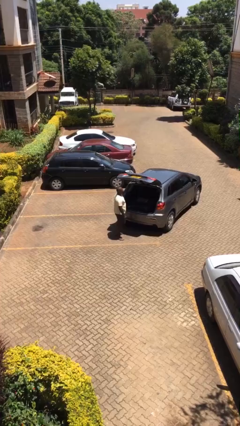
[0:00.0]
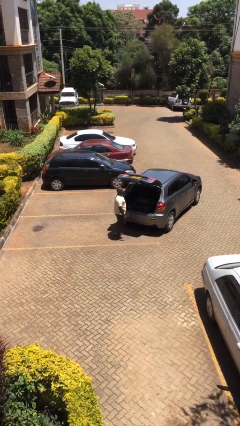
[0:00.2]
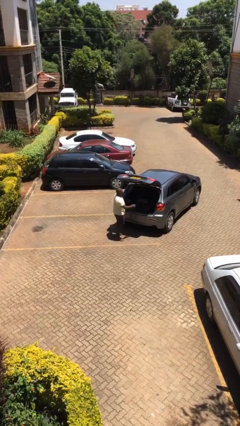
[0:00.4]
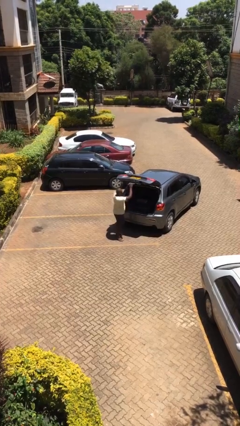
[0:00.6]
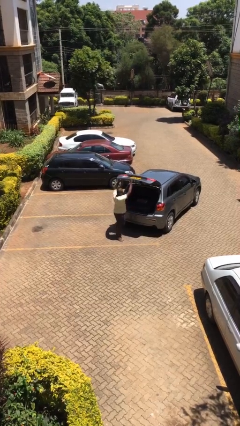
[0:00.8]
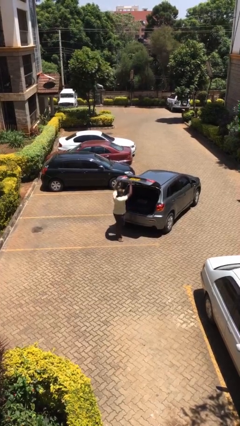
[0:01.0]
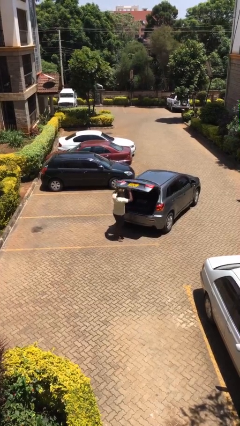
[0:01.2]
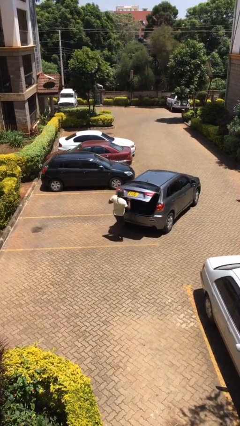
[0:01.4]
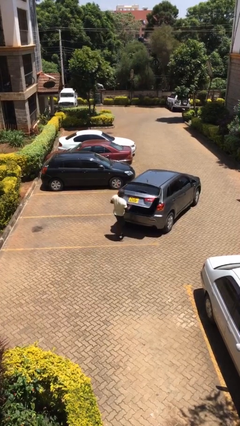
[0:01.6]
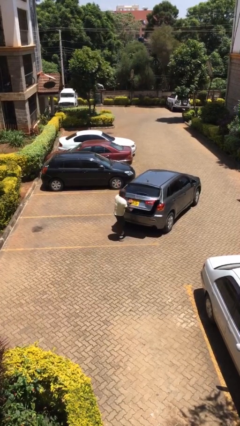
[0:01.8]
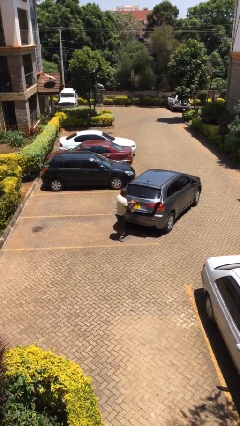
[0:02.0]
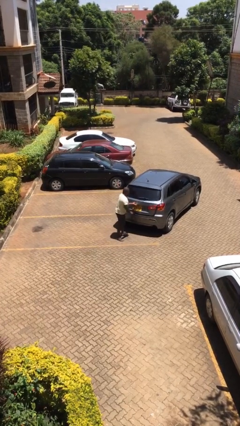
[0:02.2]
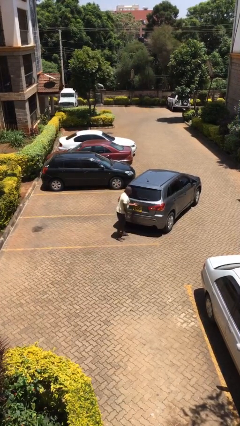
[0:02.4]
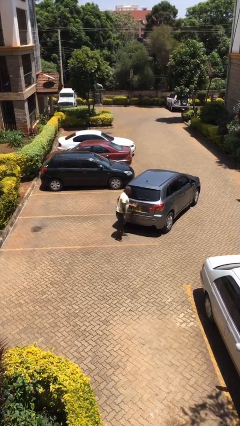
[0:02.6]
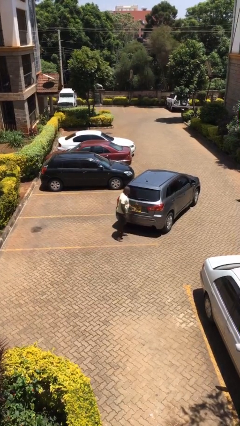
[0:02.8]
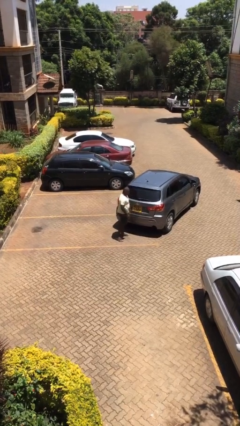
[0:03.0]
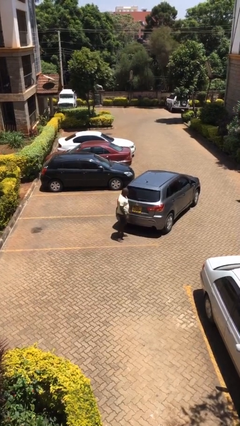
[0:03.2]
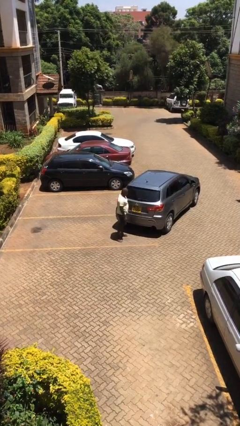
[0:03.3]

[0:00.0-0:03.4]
person closes car trunk

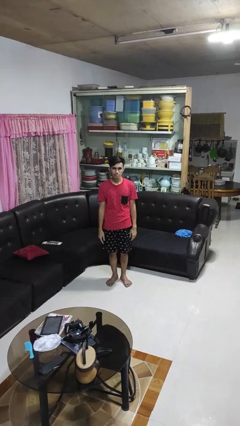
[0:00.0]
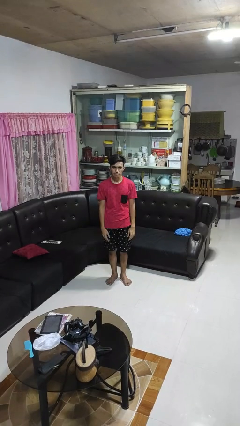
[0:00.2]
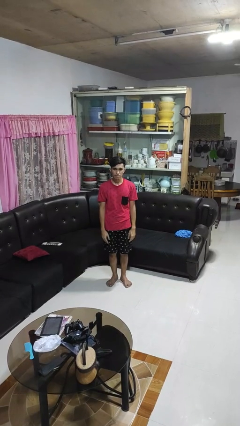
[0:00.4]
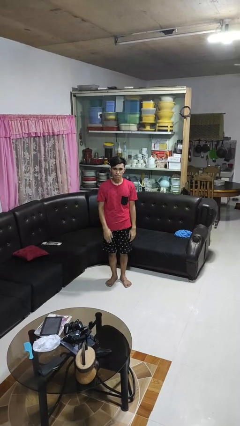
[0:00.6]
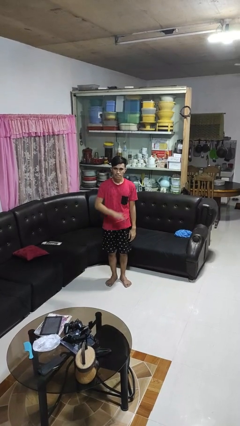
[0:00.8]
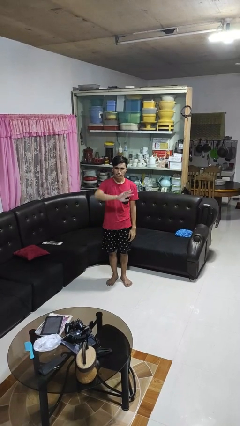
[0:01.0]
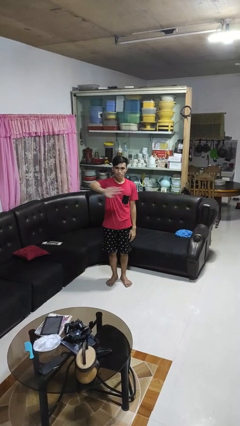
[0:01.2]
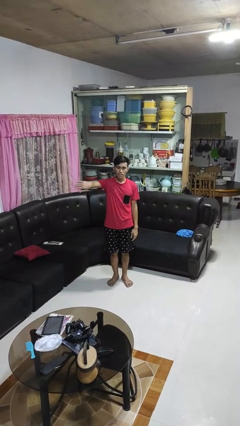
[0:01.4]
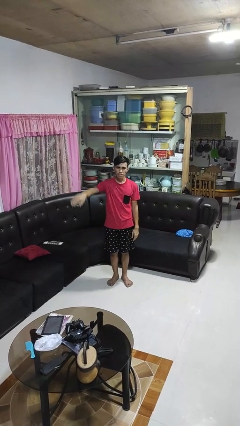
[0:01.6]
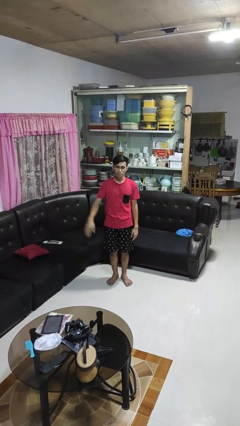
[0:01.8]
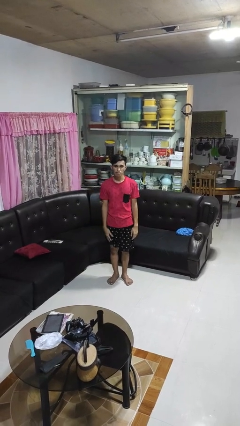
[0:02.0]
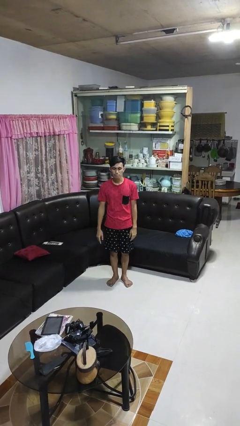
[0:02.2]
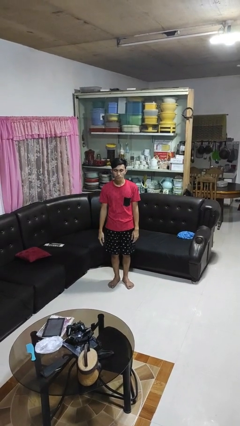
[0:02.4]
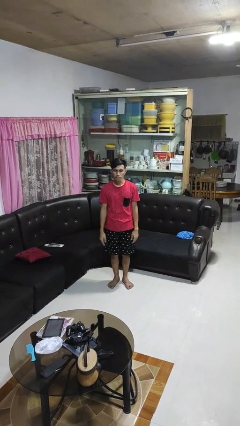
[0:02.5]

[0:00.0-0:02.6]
person gestures swipe right

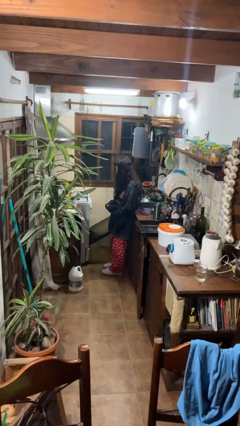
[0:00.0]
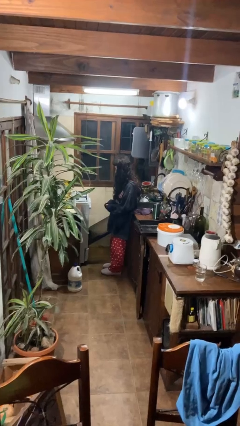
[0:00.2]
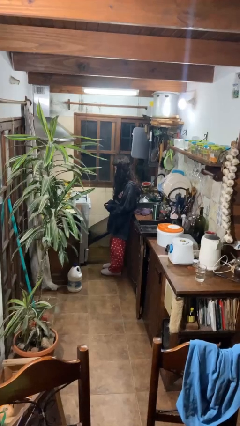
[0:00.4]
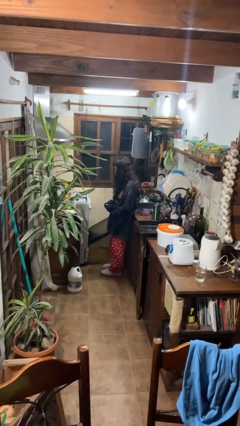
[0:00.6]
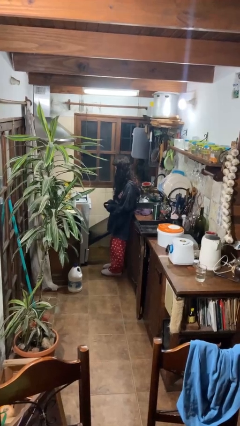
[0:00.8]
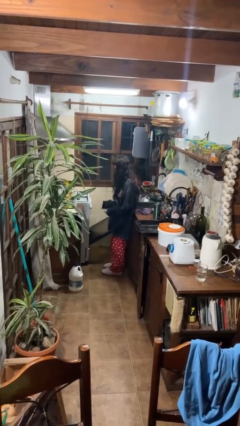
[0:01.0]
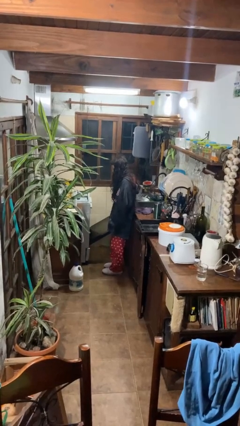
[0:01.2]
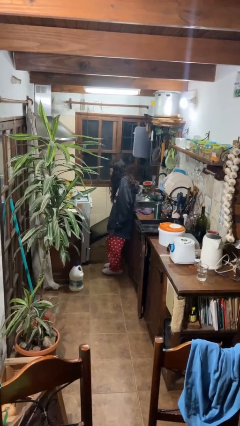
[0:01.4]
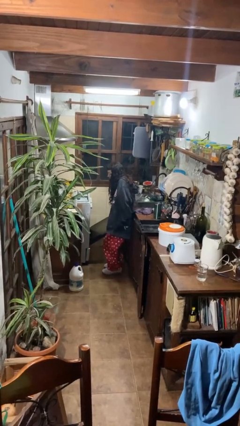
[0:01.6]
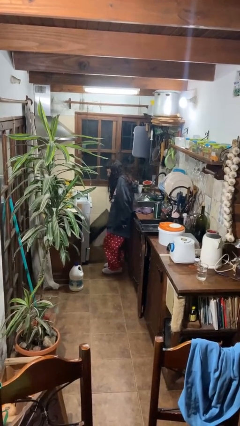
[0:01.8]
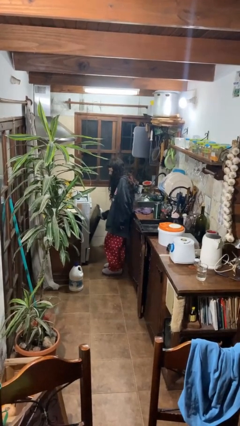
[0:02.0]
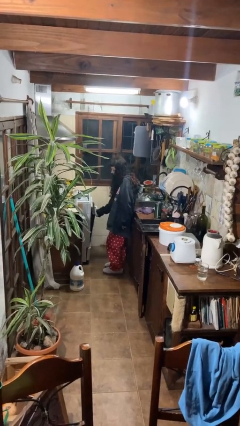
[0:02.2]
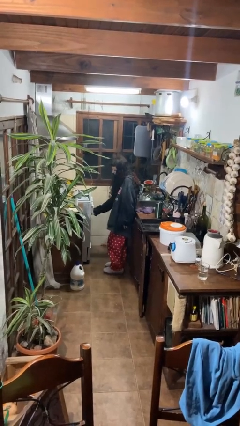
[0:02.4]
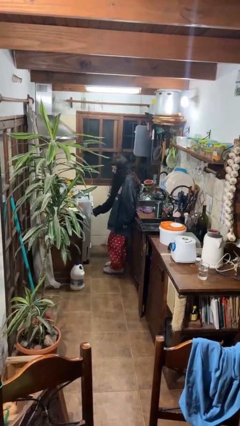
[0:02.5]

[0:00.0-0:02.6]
person closes oven door

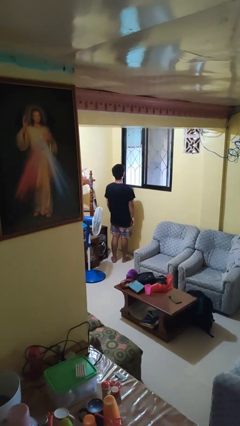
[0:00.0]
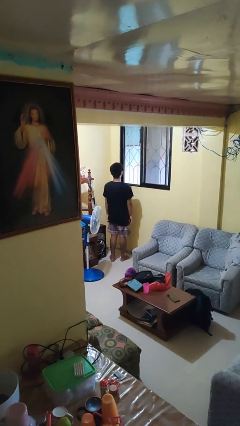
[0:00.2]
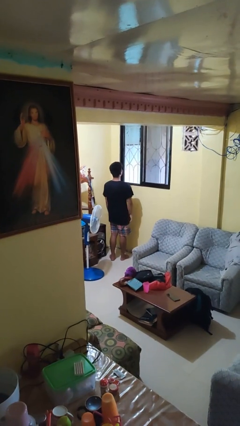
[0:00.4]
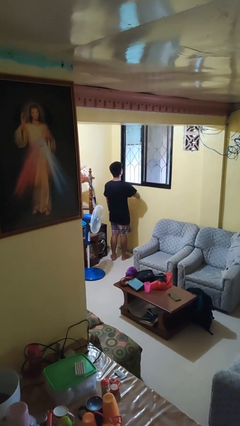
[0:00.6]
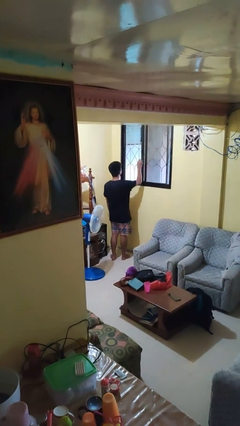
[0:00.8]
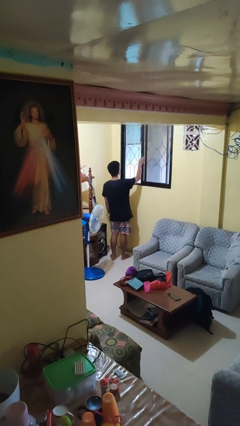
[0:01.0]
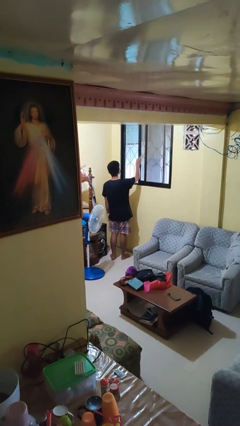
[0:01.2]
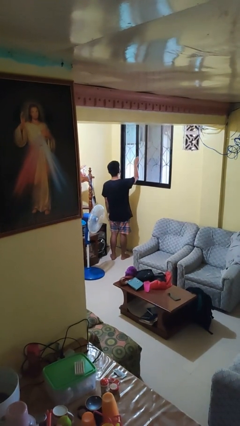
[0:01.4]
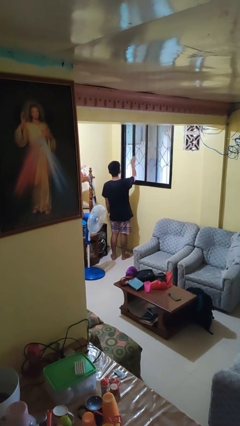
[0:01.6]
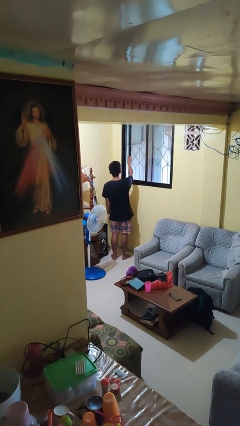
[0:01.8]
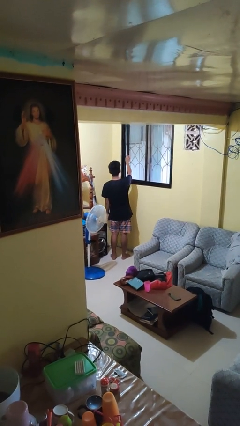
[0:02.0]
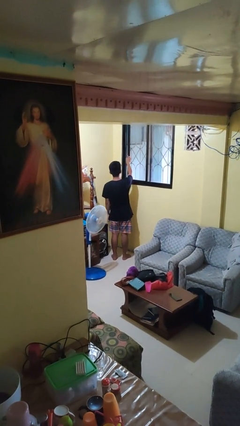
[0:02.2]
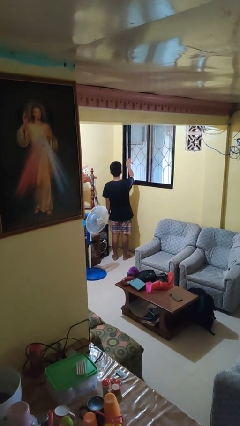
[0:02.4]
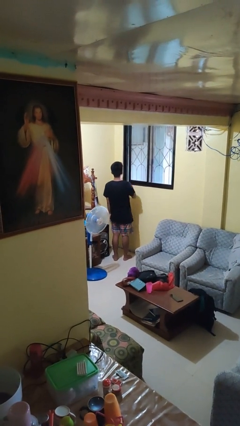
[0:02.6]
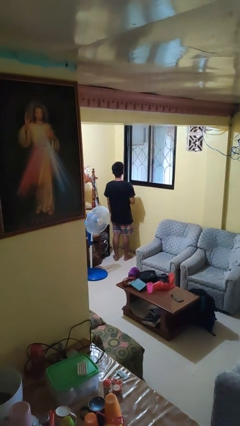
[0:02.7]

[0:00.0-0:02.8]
person closes home window

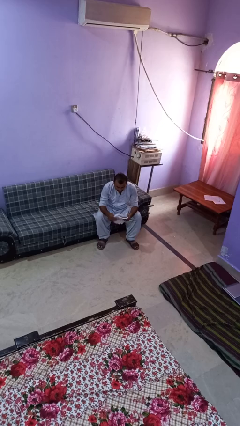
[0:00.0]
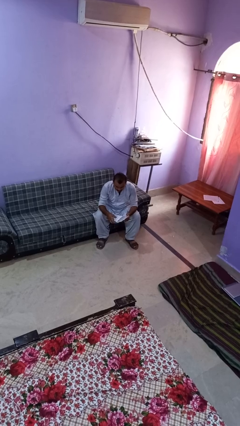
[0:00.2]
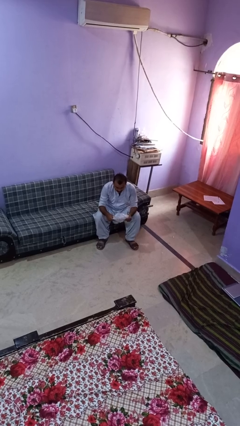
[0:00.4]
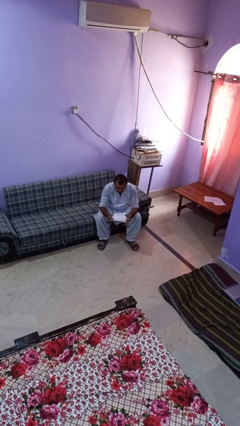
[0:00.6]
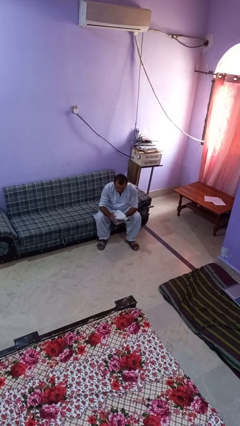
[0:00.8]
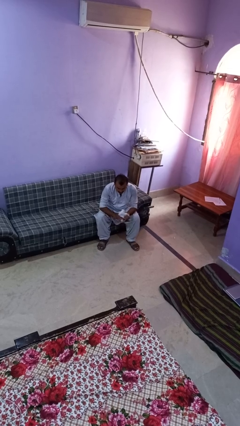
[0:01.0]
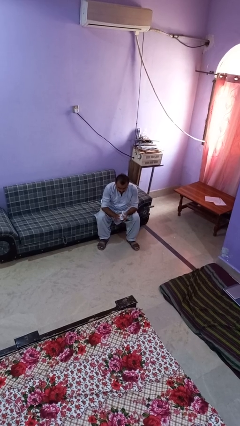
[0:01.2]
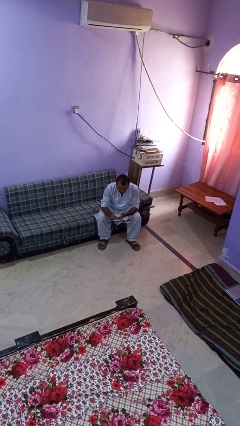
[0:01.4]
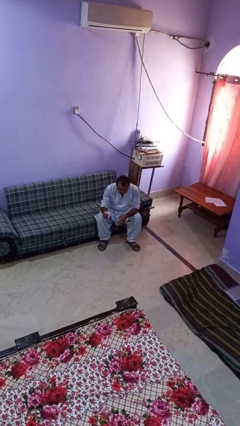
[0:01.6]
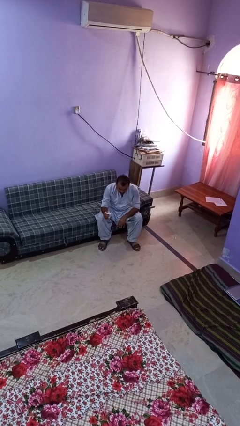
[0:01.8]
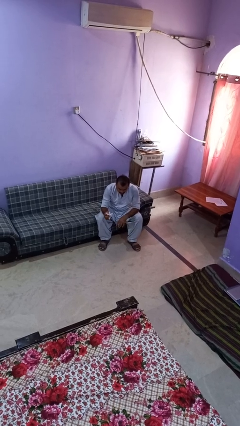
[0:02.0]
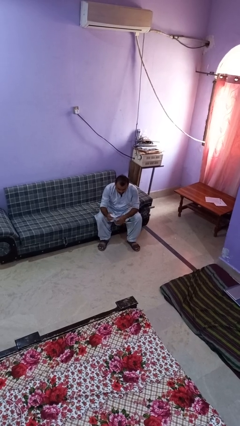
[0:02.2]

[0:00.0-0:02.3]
person crumples paper

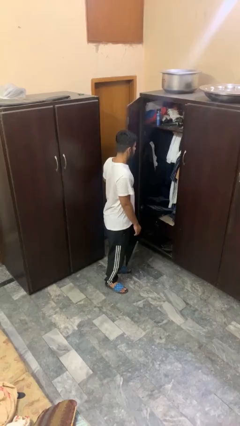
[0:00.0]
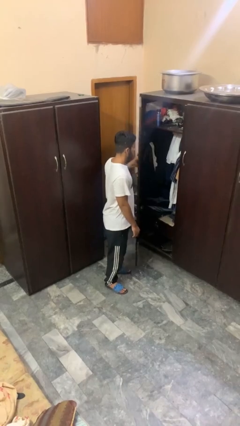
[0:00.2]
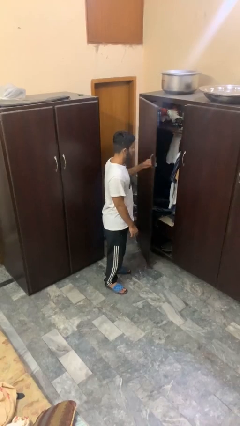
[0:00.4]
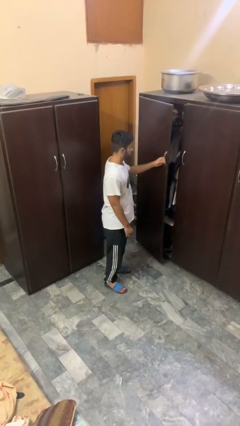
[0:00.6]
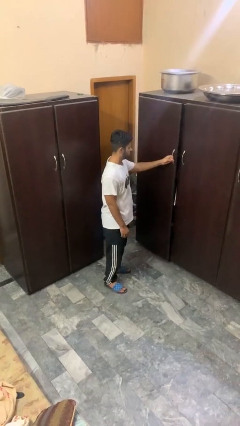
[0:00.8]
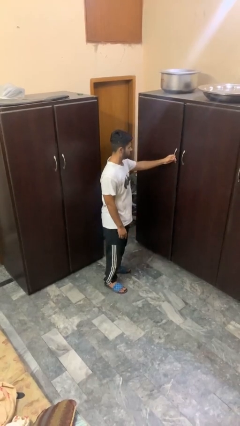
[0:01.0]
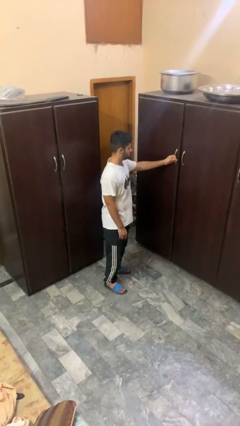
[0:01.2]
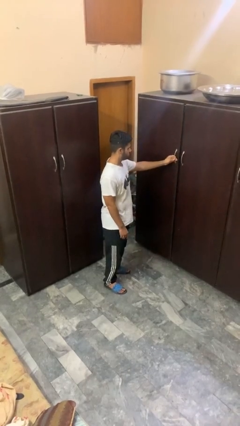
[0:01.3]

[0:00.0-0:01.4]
person closes closet door

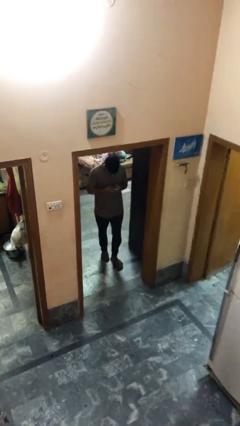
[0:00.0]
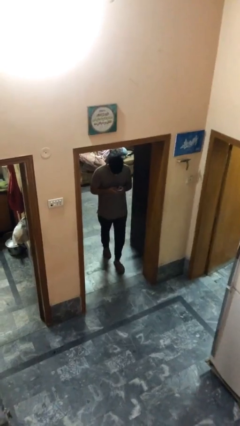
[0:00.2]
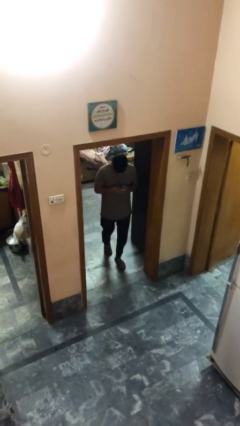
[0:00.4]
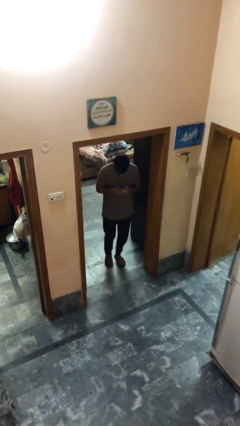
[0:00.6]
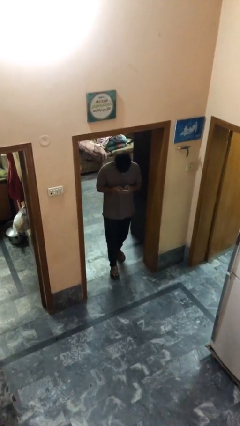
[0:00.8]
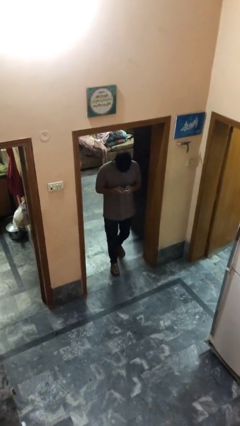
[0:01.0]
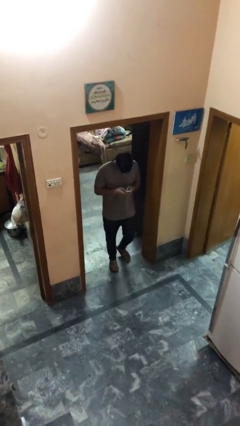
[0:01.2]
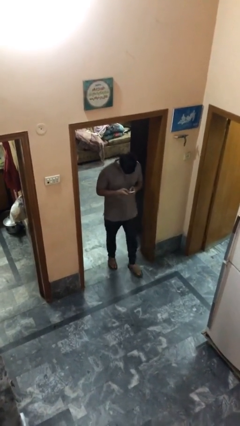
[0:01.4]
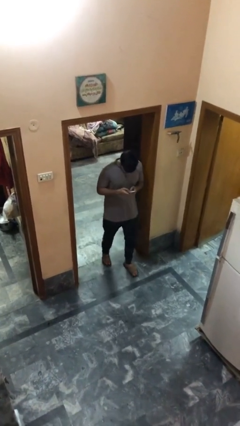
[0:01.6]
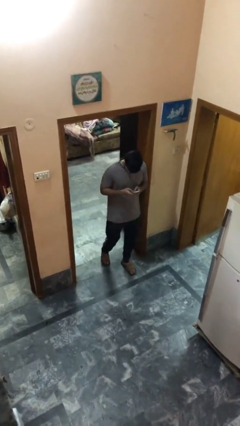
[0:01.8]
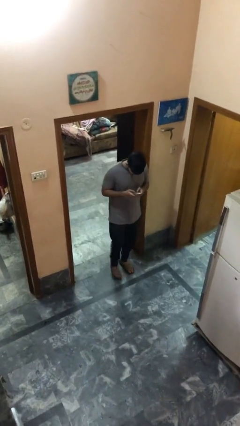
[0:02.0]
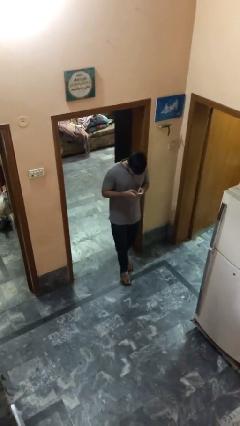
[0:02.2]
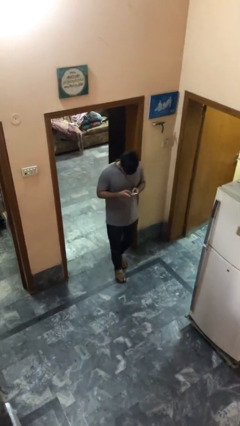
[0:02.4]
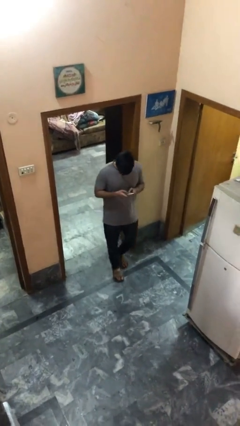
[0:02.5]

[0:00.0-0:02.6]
person enters scene through structure
